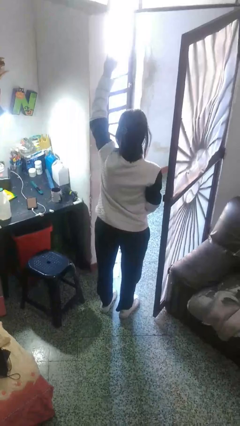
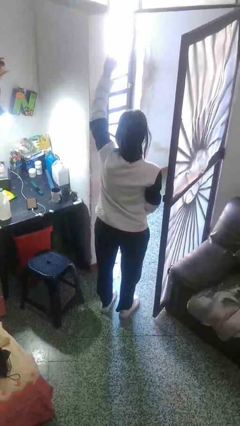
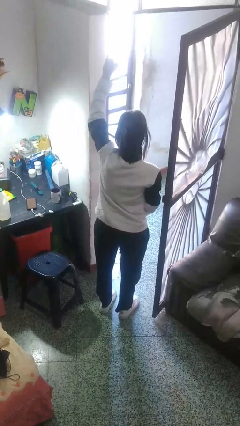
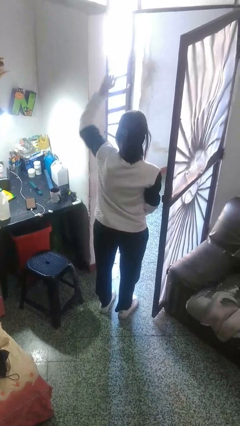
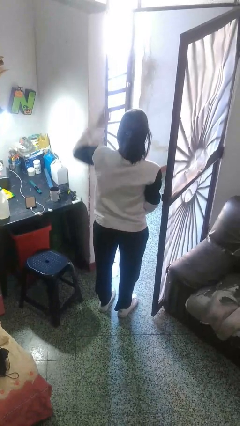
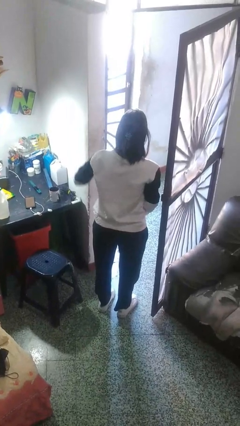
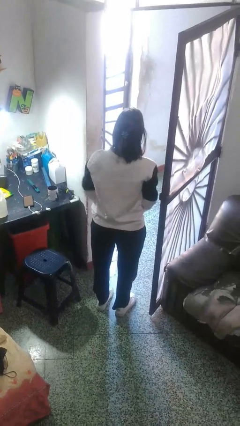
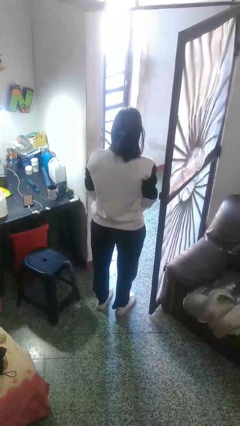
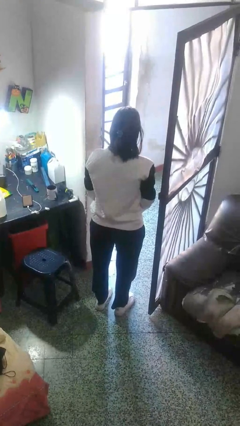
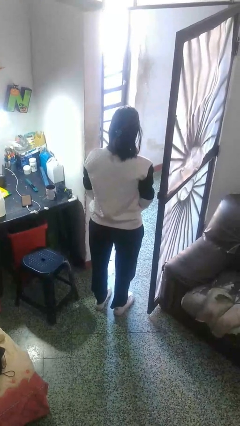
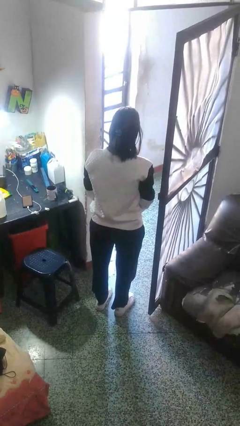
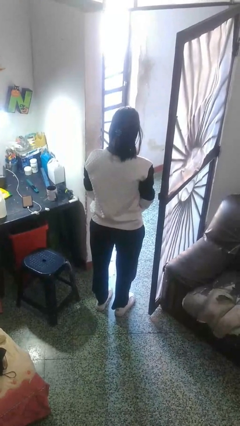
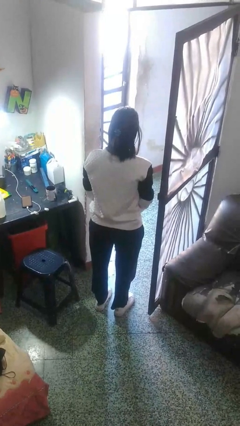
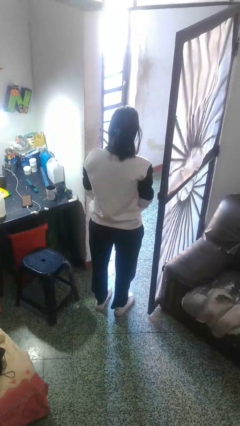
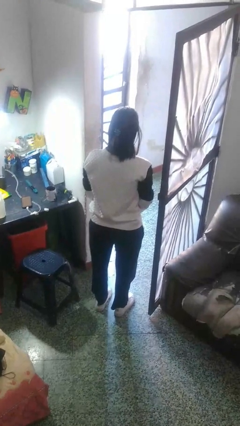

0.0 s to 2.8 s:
person gestures lower hand

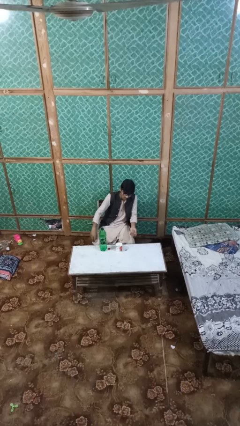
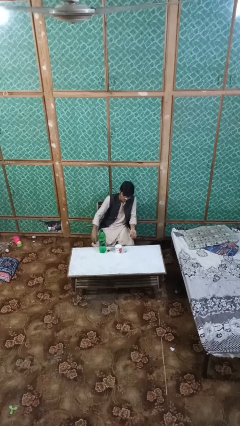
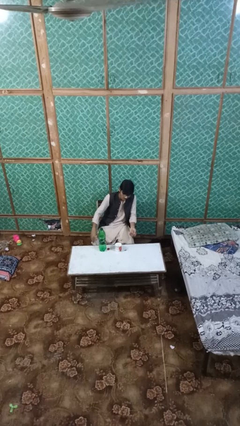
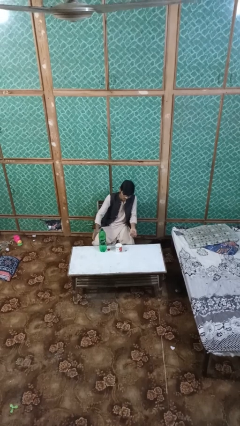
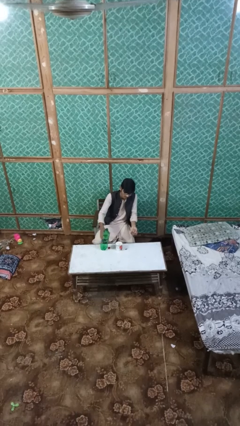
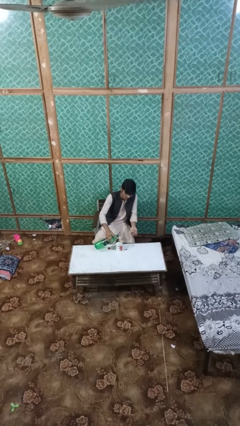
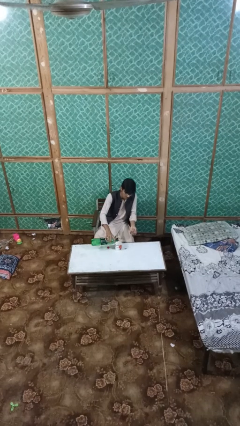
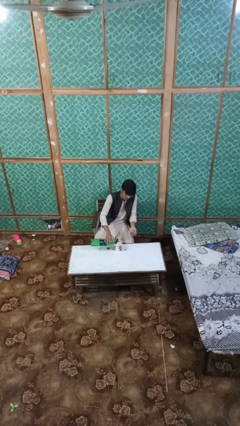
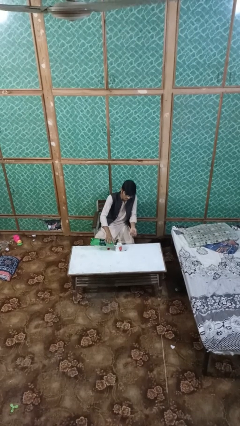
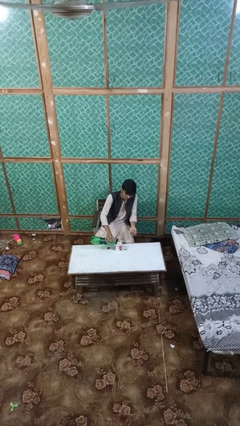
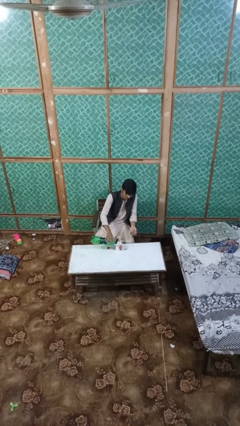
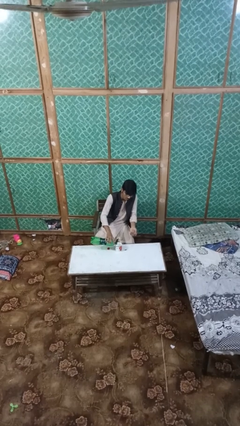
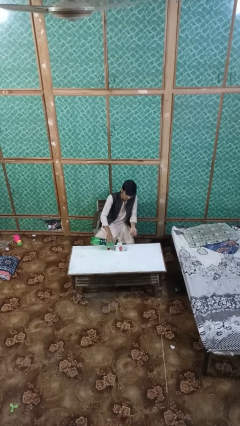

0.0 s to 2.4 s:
person pours liquid into cup

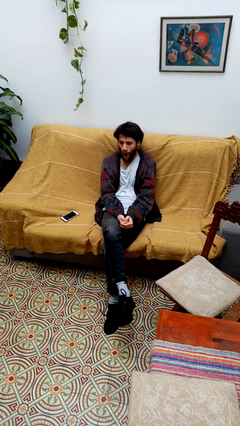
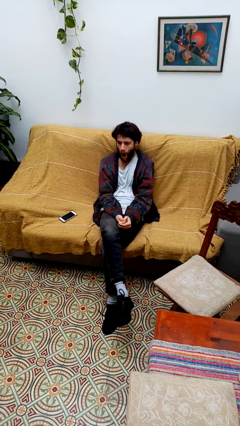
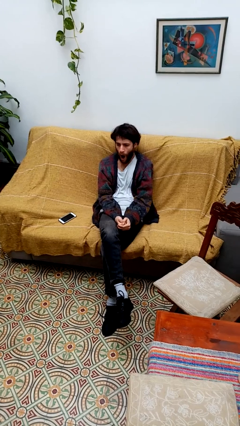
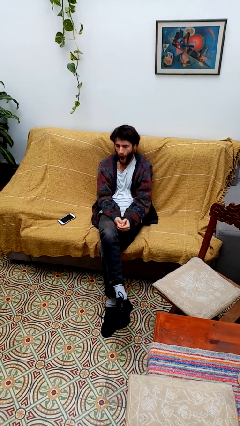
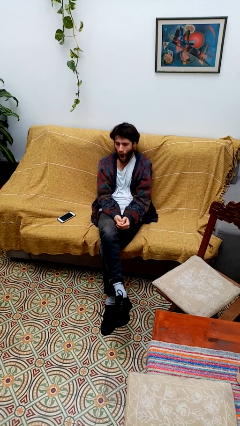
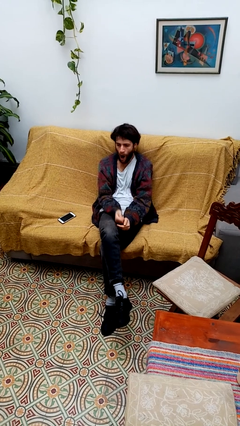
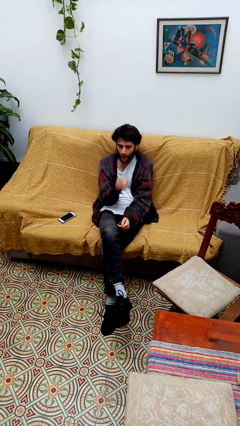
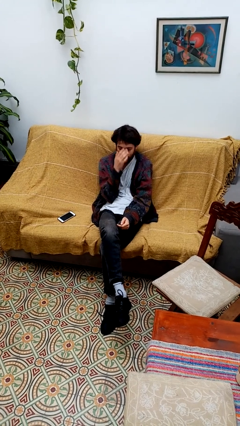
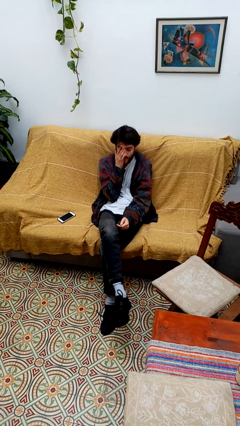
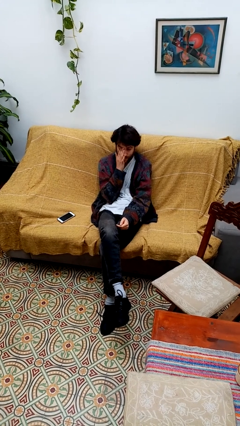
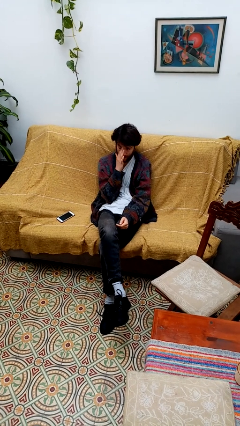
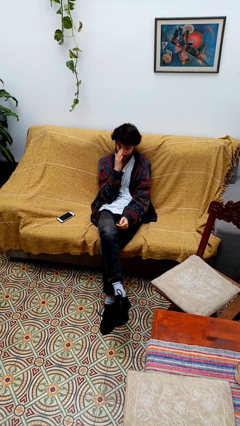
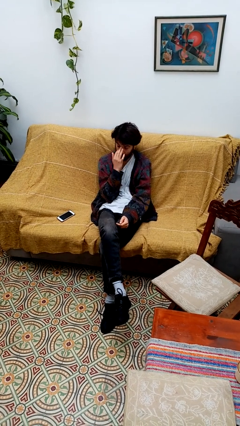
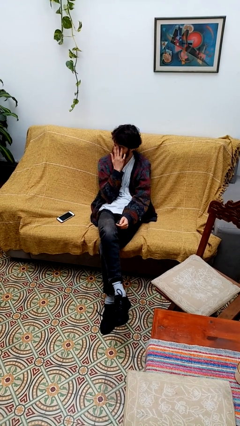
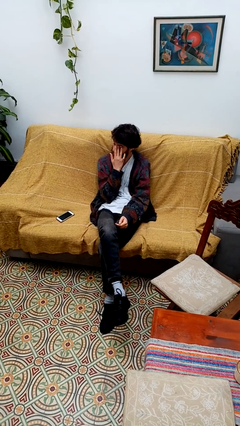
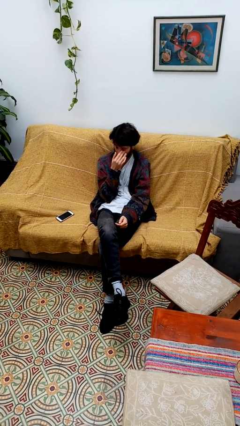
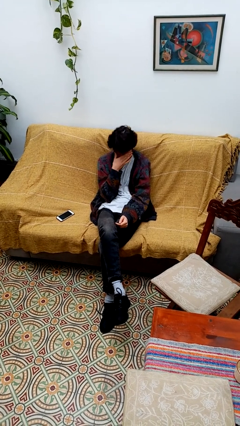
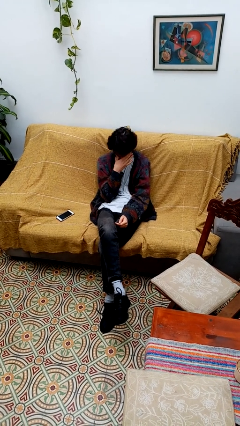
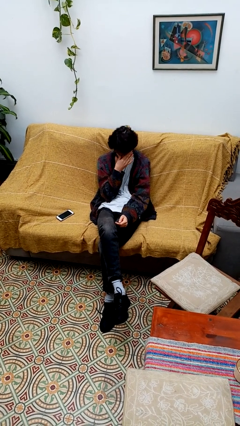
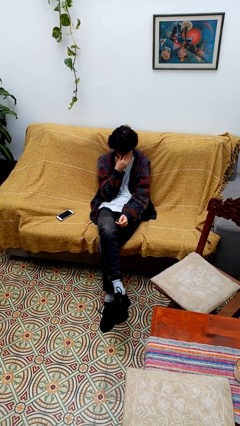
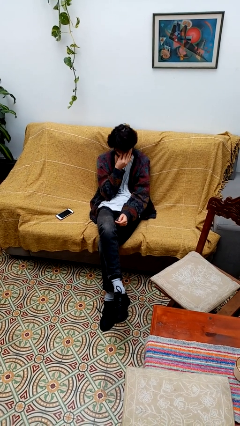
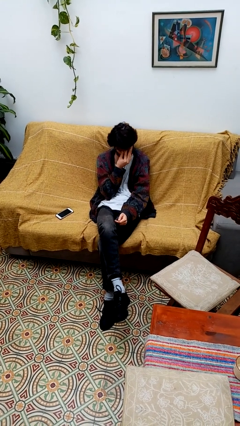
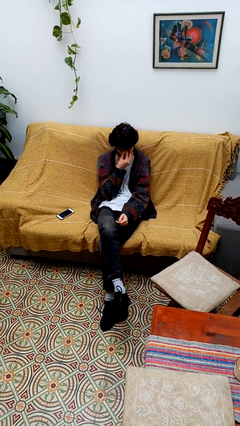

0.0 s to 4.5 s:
person rubs eyes

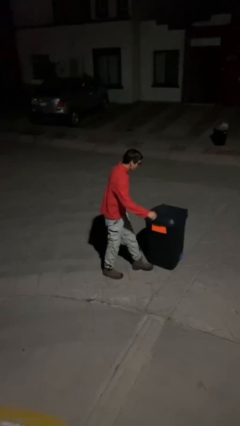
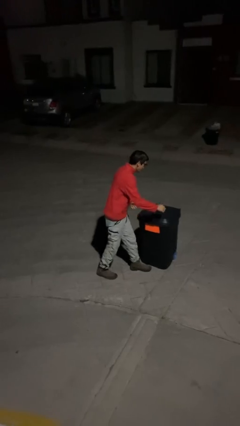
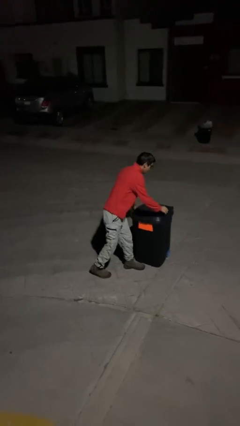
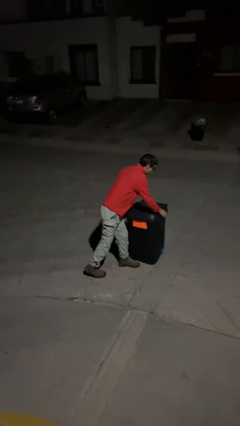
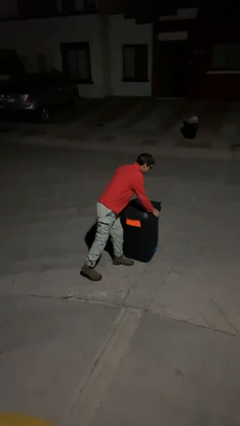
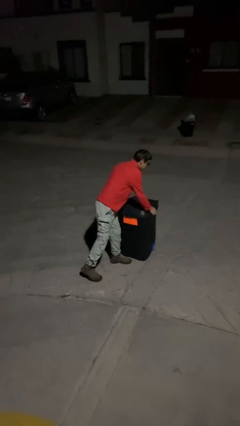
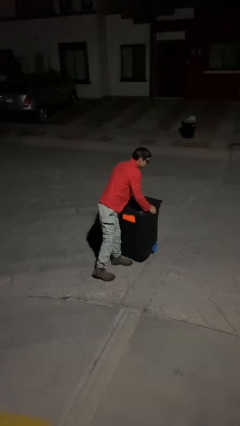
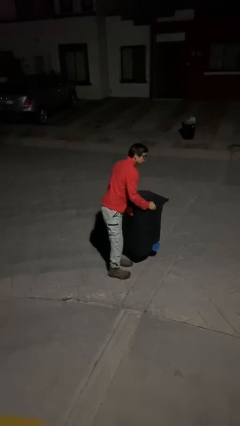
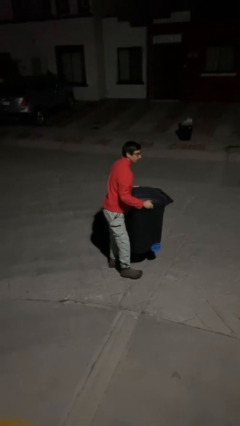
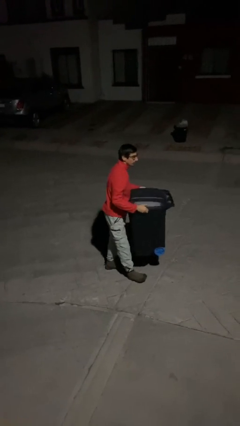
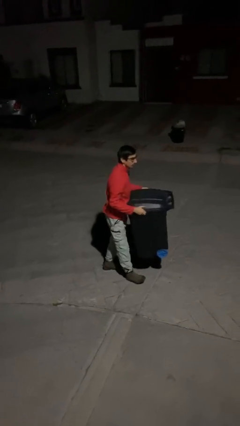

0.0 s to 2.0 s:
person picks up object from floor

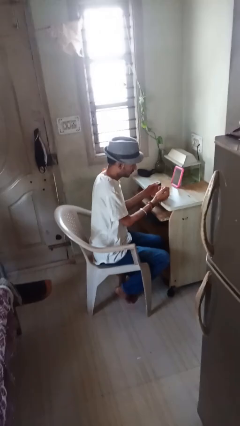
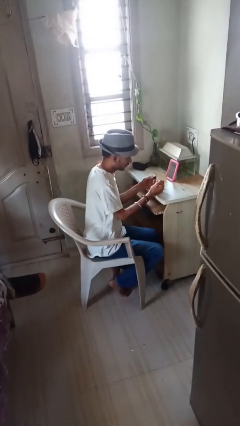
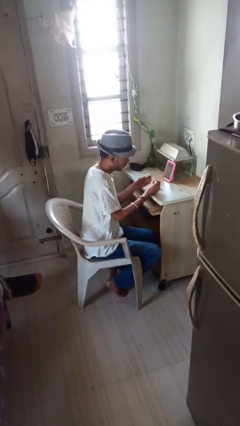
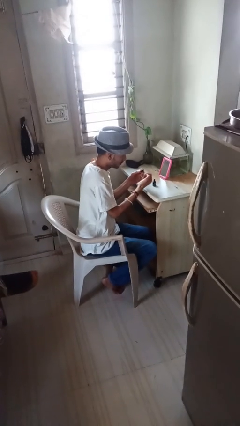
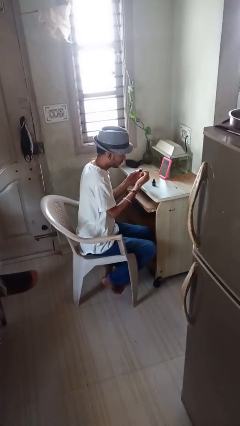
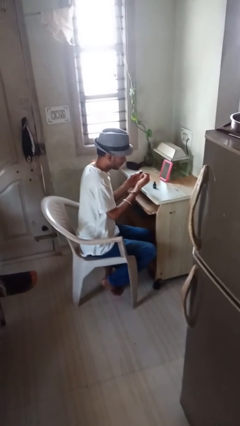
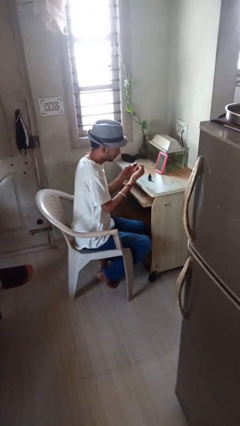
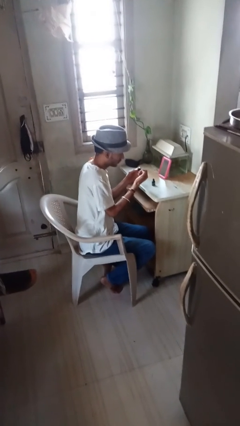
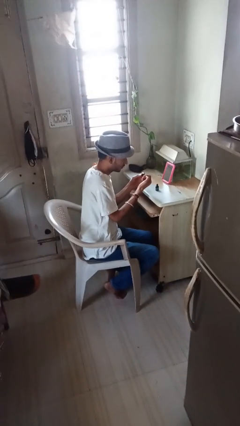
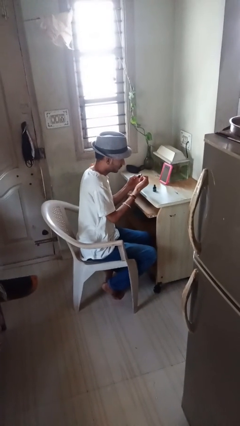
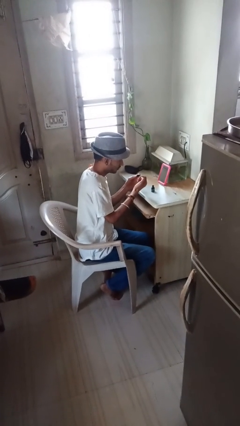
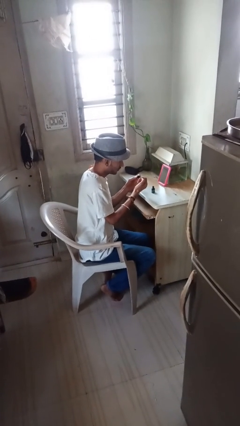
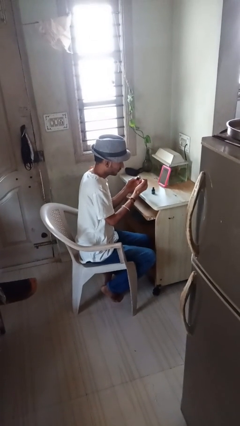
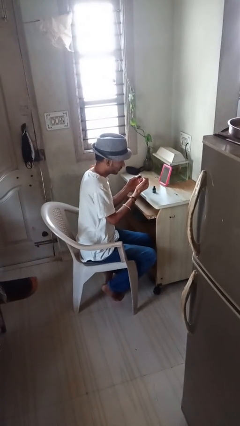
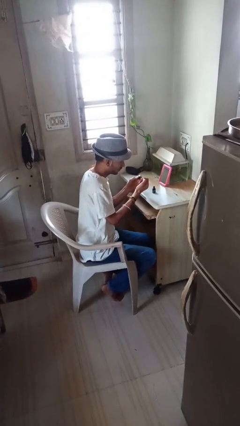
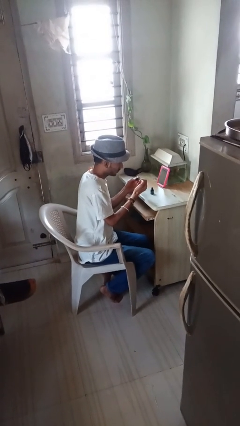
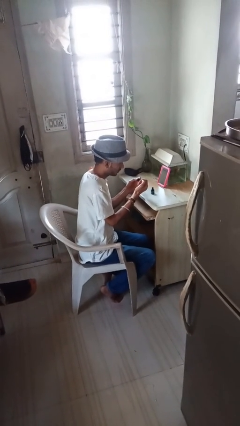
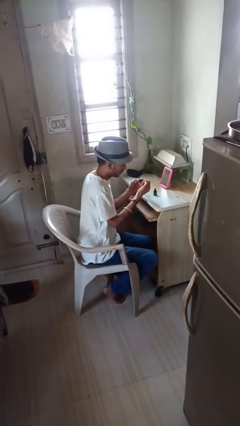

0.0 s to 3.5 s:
person paints fingernails

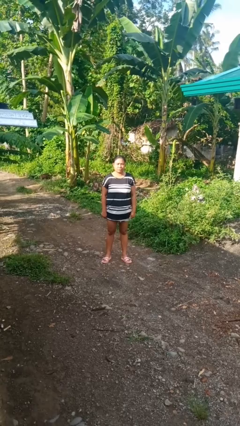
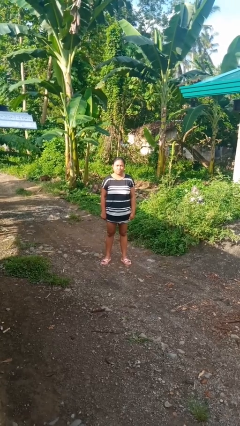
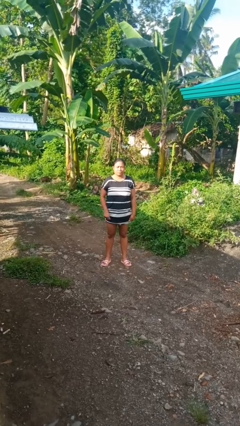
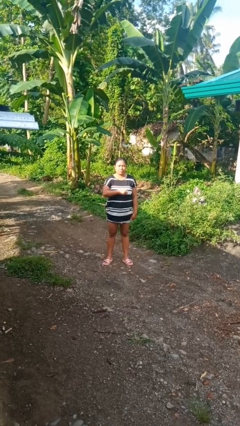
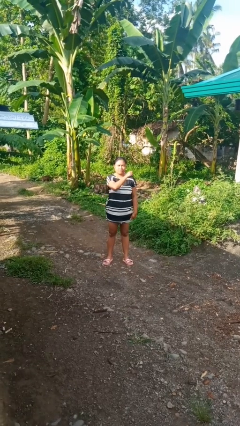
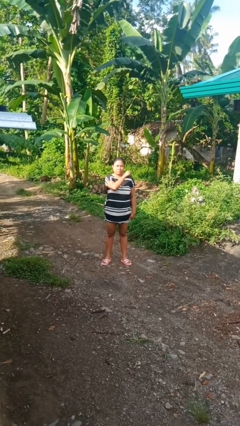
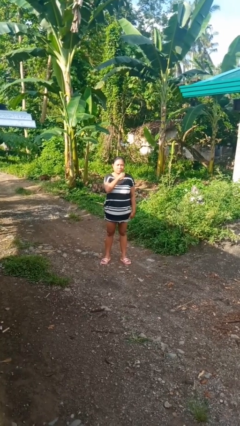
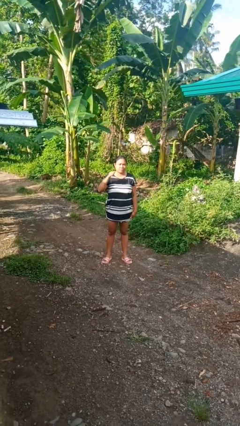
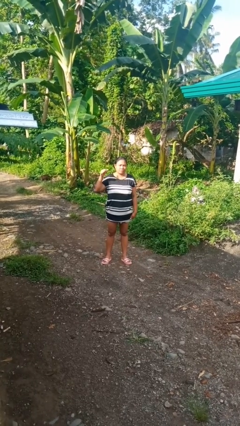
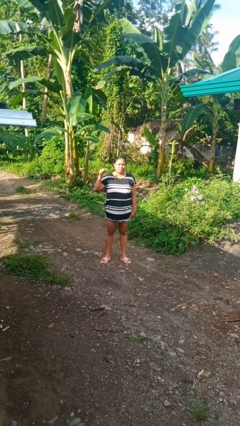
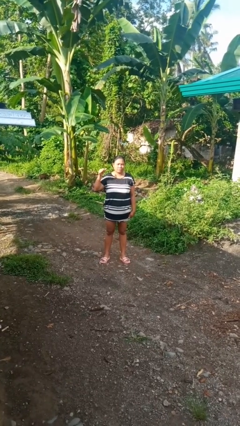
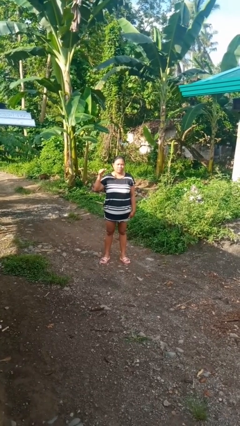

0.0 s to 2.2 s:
person gestures cut
